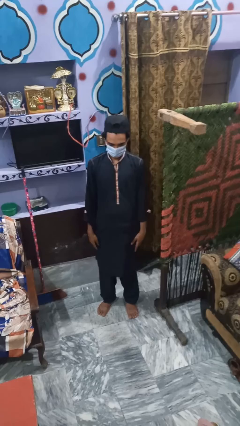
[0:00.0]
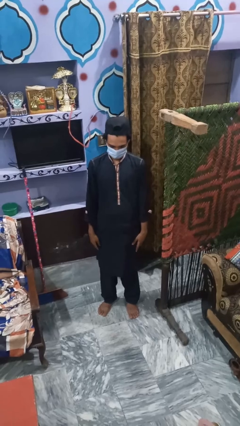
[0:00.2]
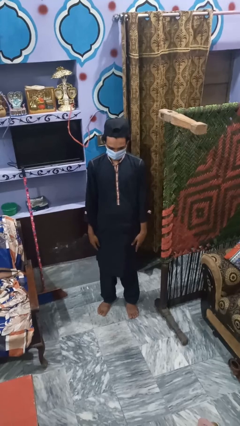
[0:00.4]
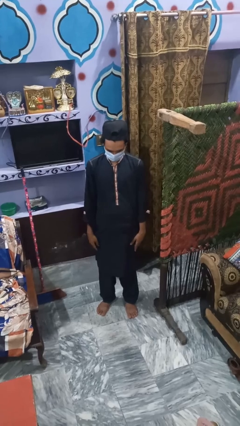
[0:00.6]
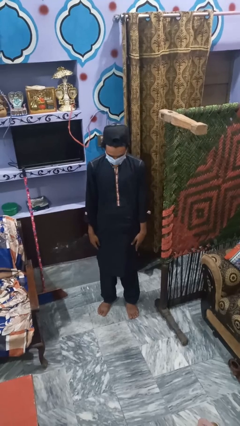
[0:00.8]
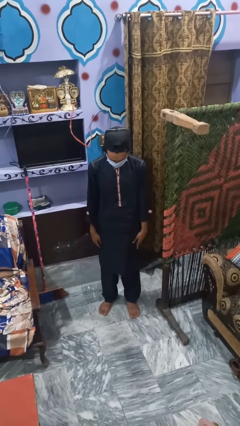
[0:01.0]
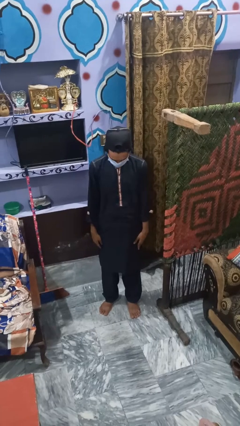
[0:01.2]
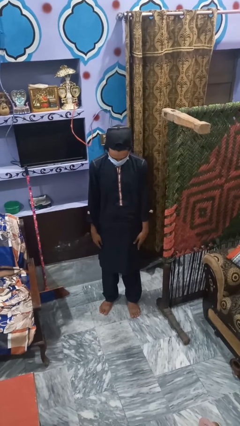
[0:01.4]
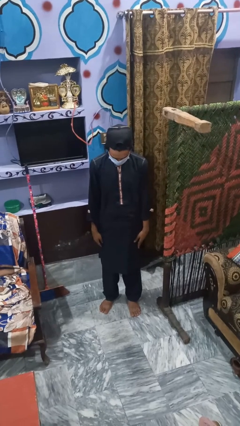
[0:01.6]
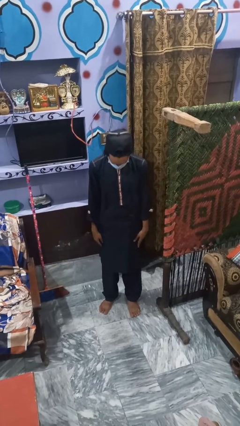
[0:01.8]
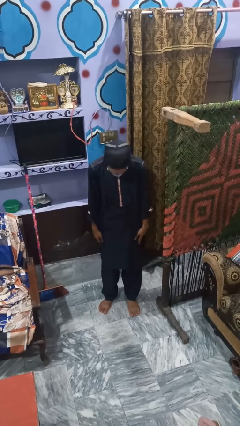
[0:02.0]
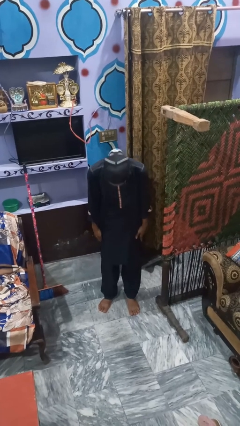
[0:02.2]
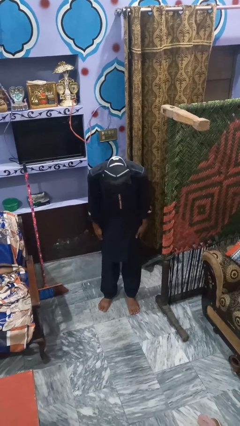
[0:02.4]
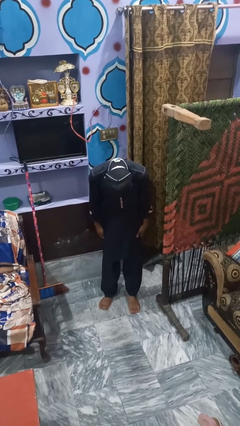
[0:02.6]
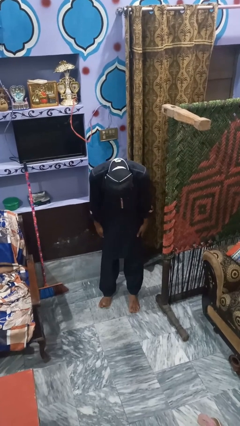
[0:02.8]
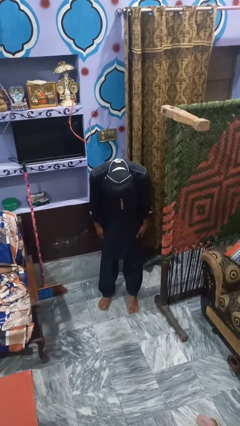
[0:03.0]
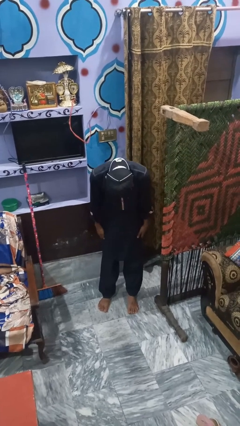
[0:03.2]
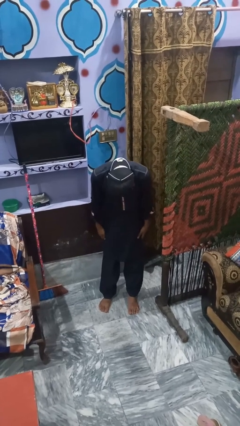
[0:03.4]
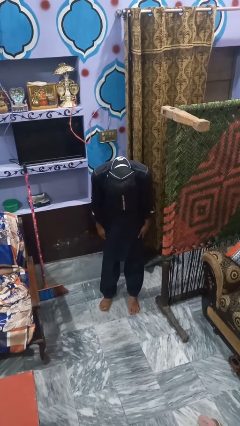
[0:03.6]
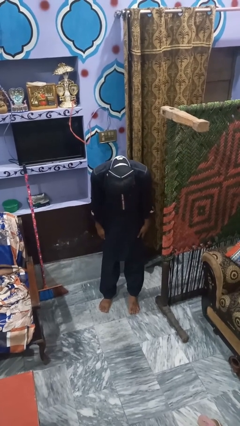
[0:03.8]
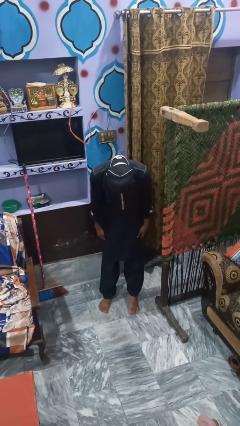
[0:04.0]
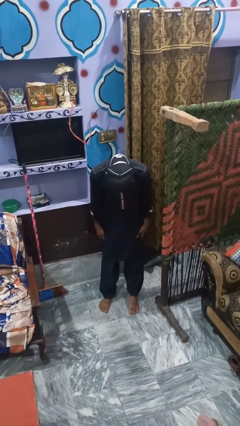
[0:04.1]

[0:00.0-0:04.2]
person bows

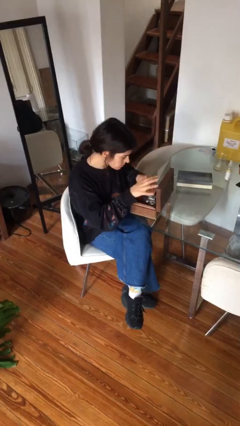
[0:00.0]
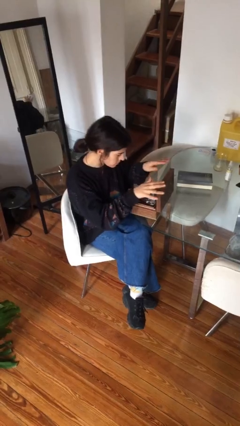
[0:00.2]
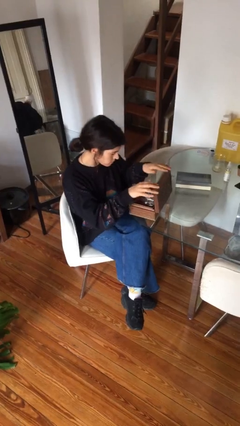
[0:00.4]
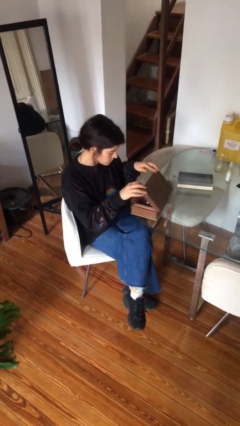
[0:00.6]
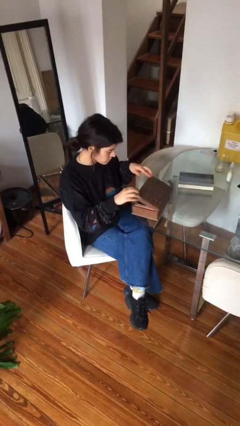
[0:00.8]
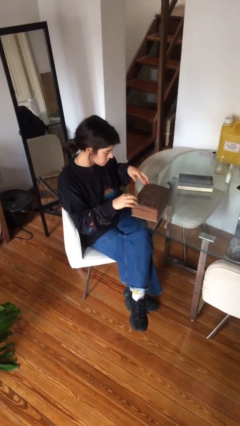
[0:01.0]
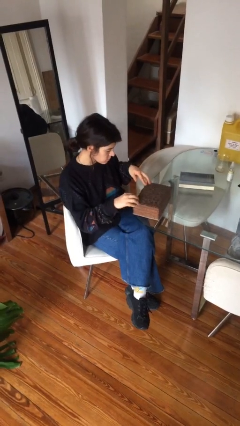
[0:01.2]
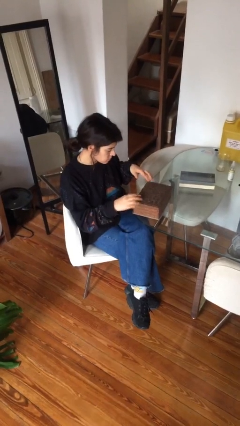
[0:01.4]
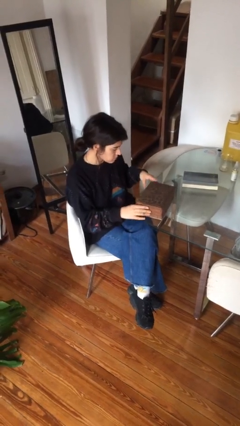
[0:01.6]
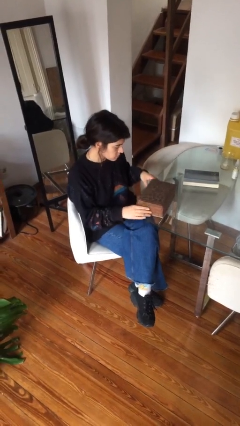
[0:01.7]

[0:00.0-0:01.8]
person closes jewelry box

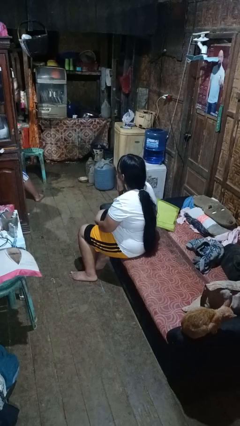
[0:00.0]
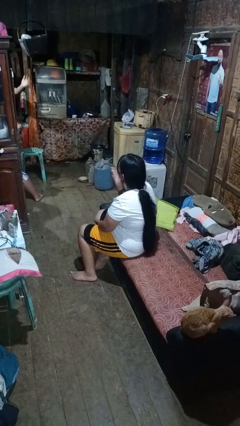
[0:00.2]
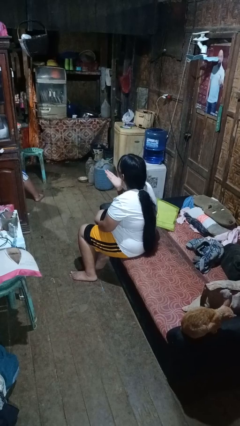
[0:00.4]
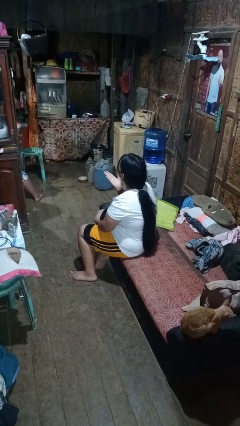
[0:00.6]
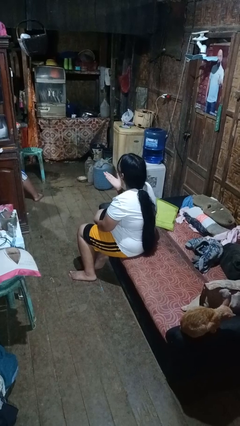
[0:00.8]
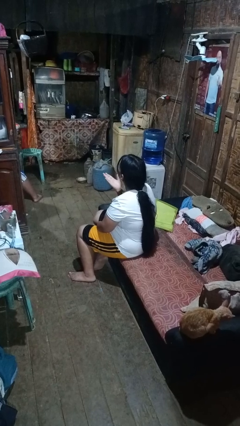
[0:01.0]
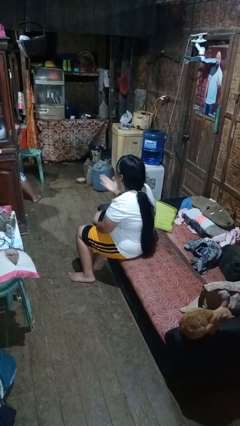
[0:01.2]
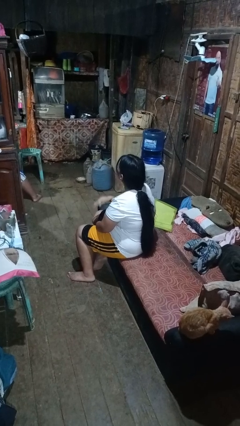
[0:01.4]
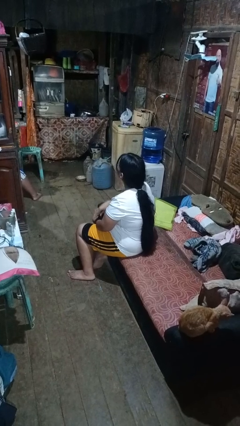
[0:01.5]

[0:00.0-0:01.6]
person gestures blow kiss

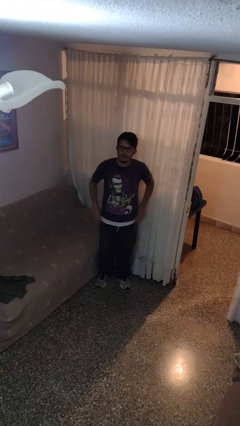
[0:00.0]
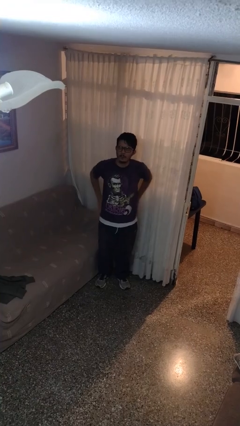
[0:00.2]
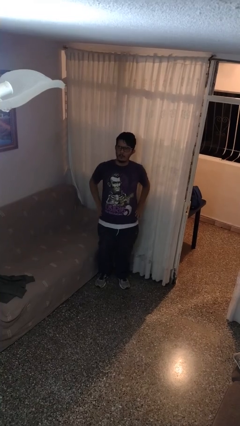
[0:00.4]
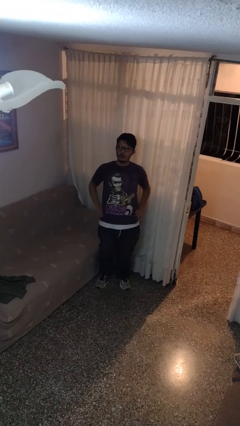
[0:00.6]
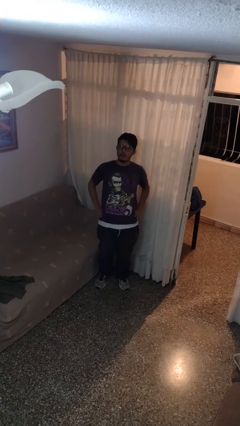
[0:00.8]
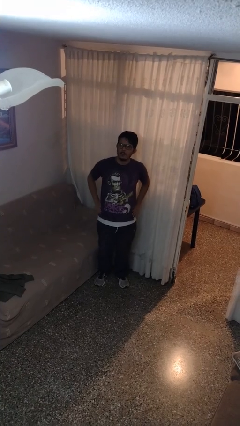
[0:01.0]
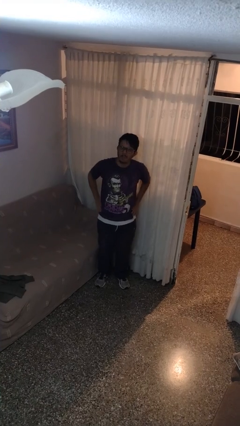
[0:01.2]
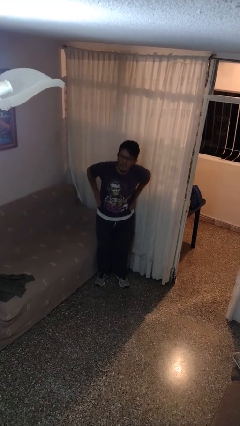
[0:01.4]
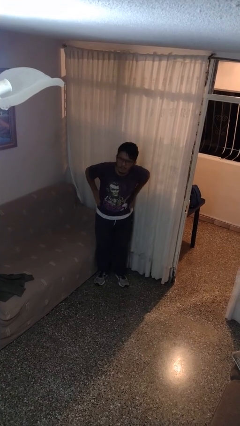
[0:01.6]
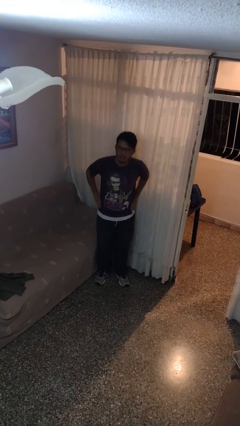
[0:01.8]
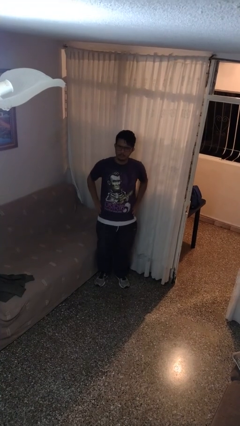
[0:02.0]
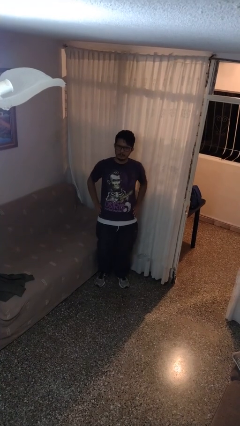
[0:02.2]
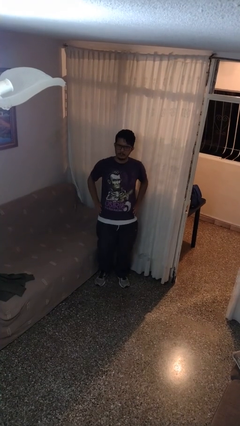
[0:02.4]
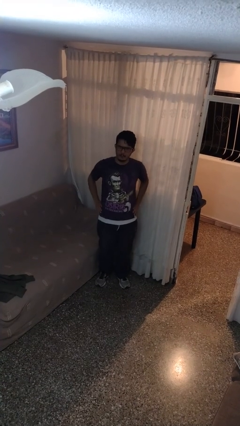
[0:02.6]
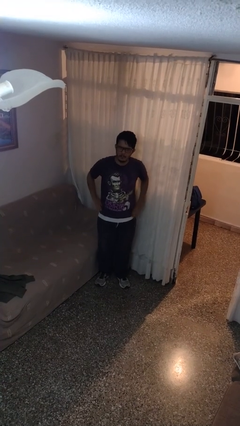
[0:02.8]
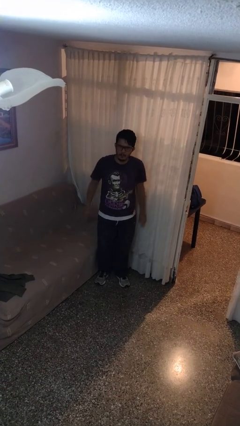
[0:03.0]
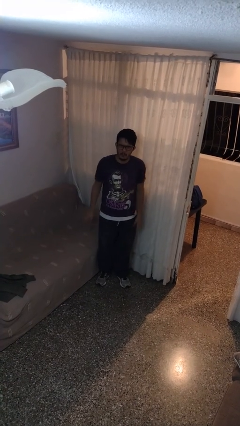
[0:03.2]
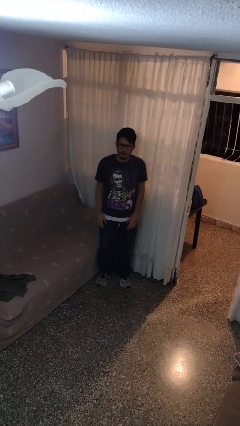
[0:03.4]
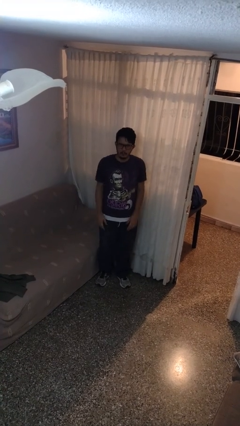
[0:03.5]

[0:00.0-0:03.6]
person wiggles hips

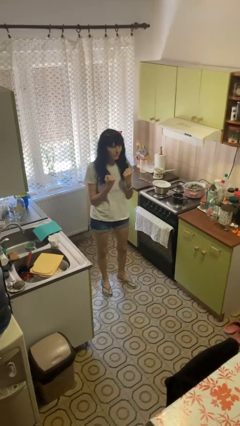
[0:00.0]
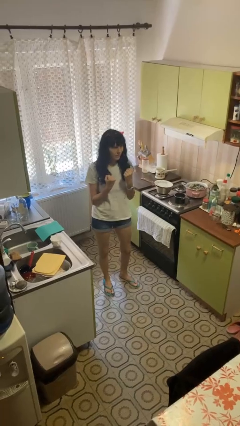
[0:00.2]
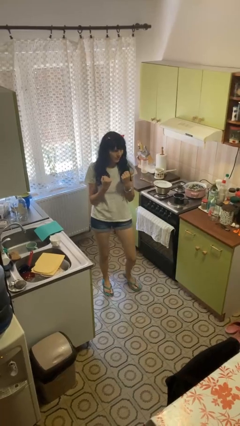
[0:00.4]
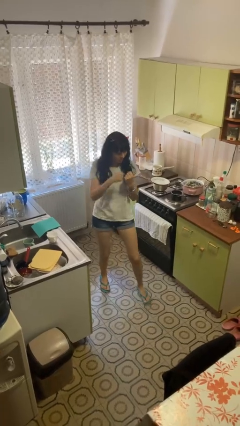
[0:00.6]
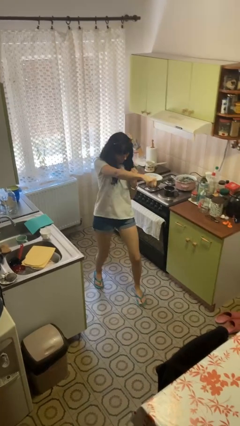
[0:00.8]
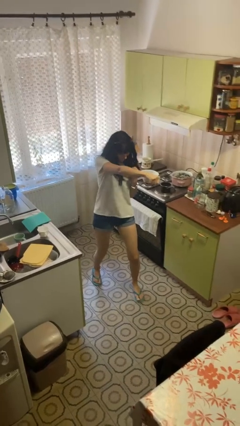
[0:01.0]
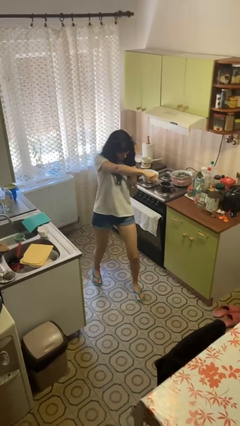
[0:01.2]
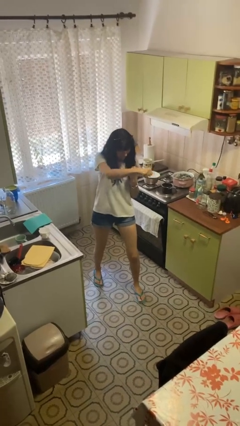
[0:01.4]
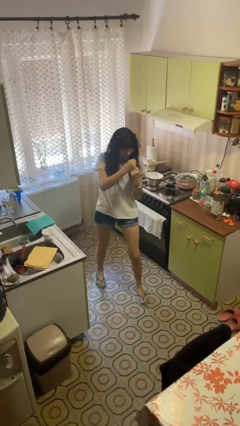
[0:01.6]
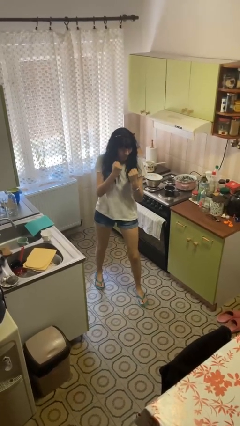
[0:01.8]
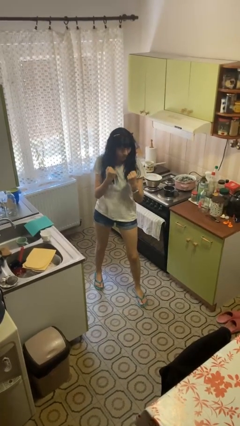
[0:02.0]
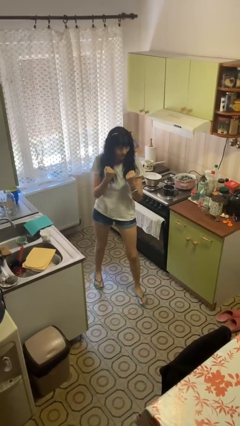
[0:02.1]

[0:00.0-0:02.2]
person punches

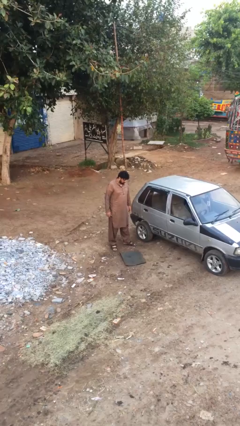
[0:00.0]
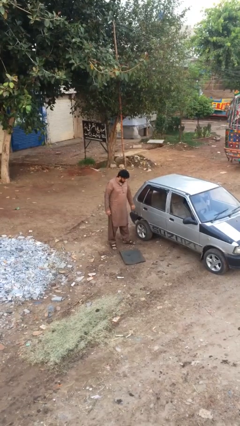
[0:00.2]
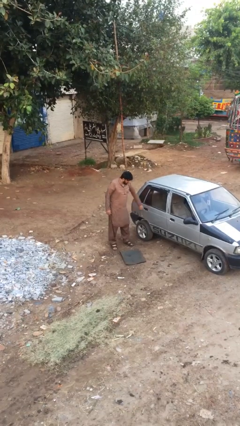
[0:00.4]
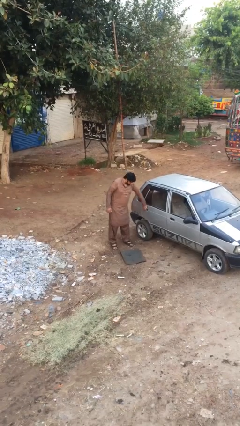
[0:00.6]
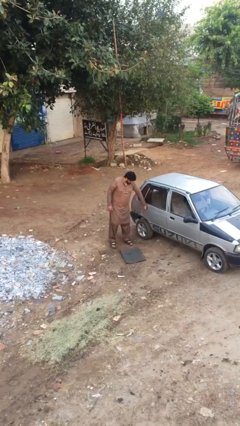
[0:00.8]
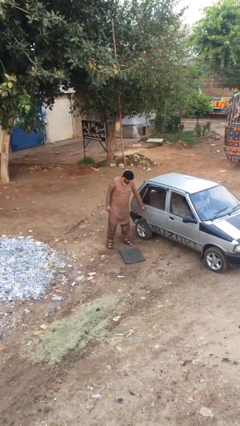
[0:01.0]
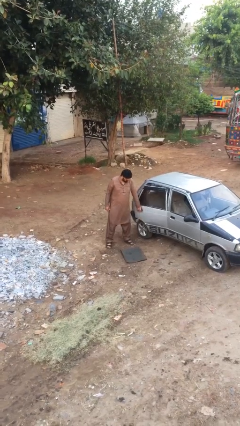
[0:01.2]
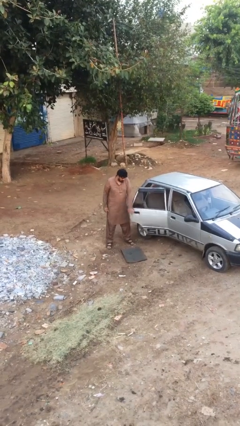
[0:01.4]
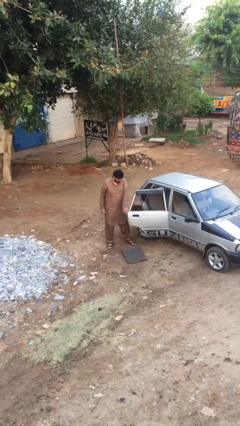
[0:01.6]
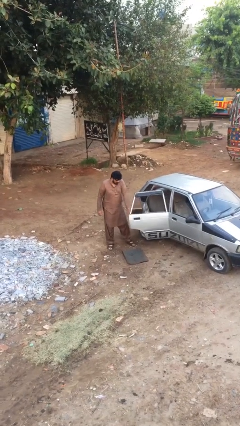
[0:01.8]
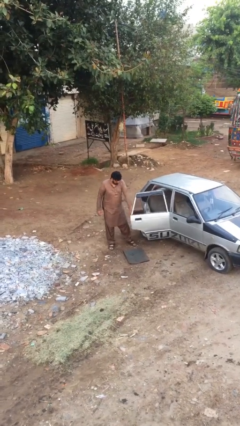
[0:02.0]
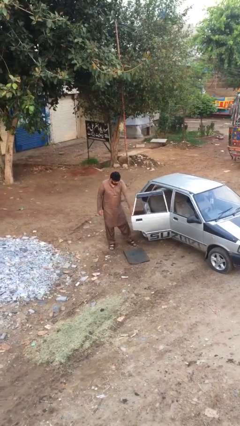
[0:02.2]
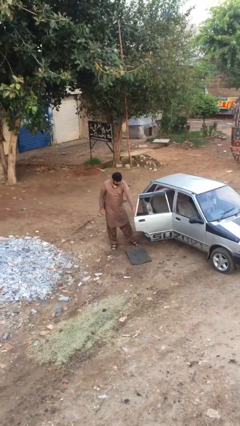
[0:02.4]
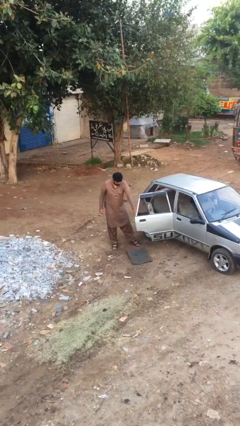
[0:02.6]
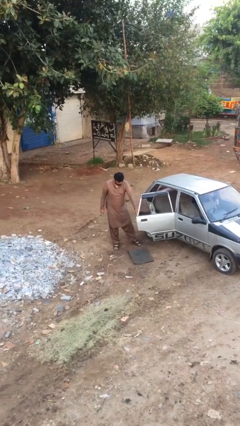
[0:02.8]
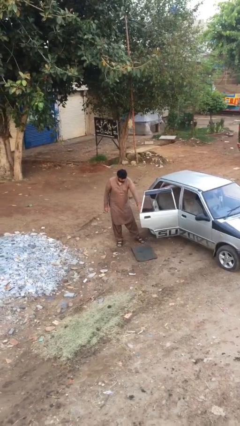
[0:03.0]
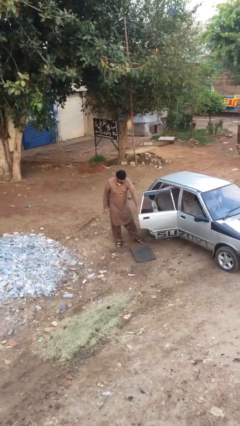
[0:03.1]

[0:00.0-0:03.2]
person opens car door

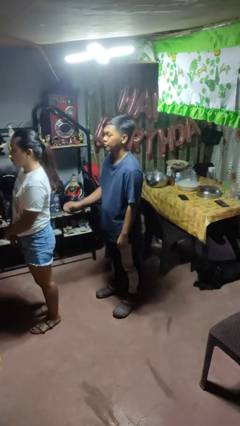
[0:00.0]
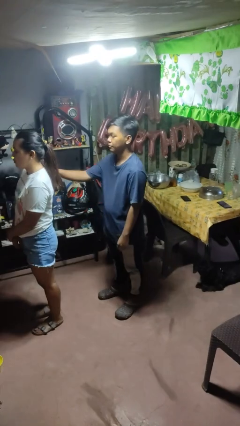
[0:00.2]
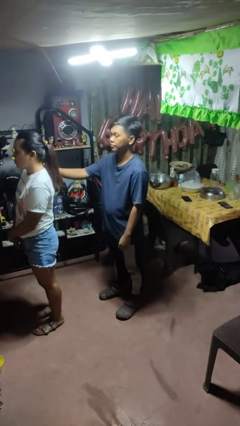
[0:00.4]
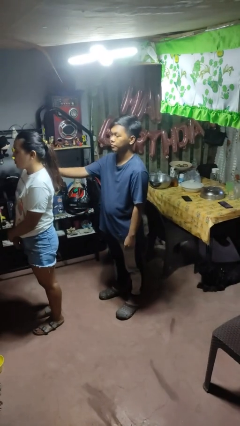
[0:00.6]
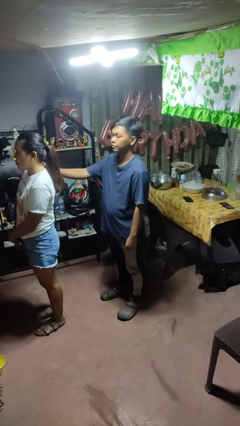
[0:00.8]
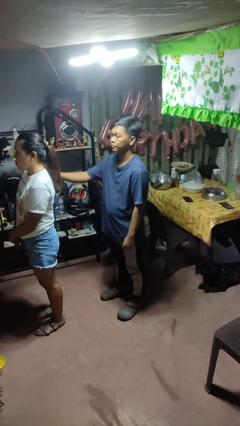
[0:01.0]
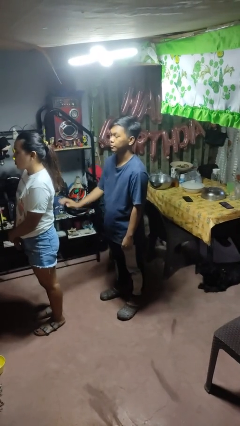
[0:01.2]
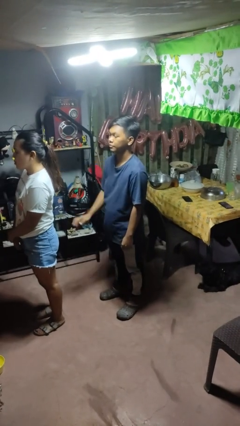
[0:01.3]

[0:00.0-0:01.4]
person pounds shoulders of person
